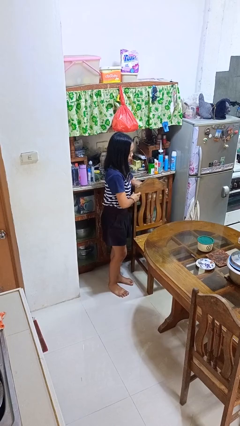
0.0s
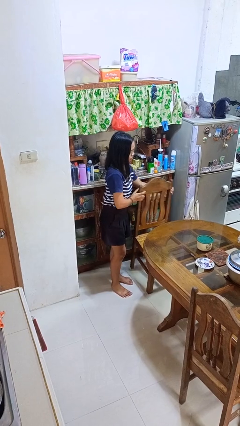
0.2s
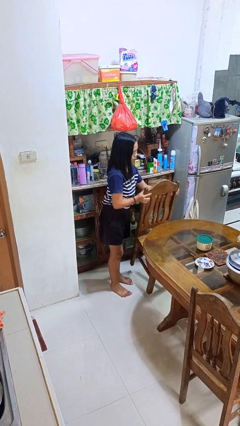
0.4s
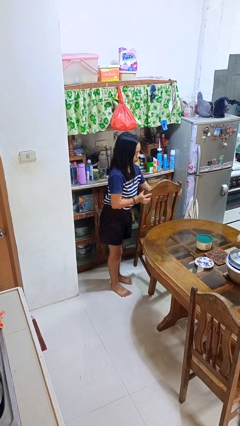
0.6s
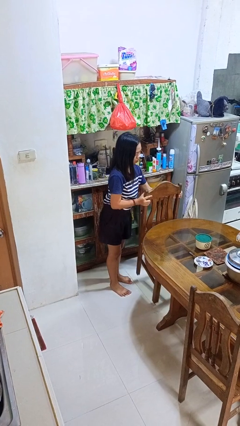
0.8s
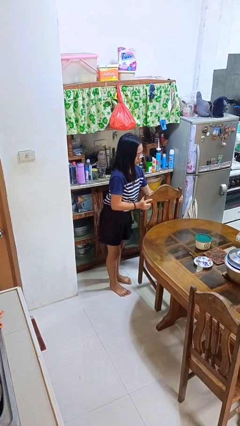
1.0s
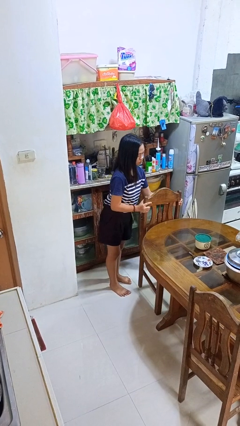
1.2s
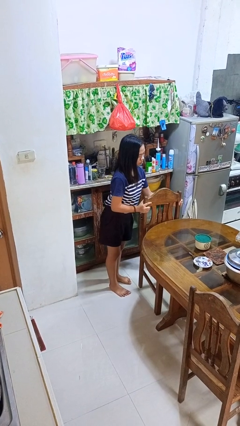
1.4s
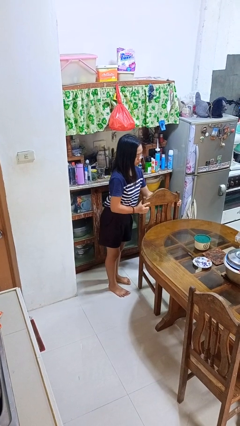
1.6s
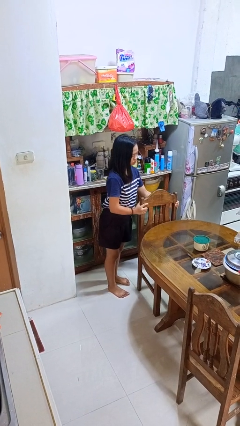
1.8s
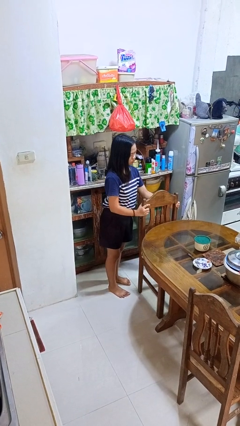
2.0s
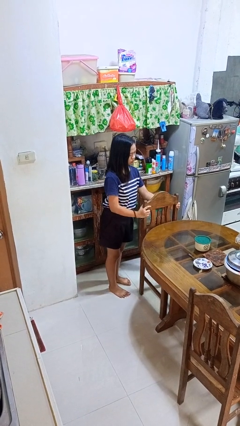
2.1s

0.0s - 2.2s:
person pushes in chair

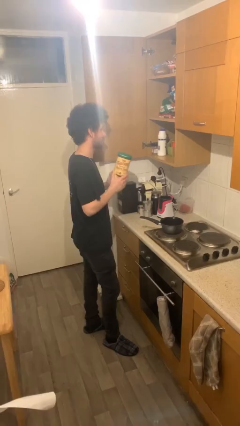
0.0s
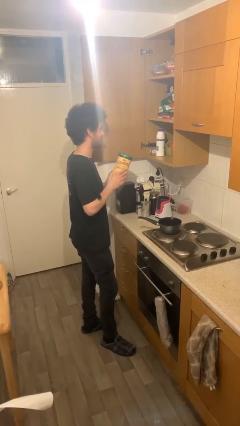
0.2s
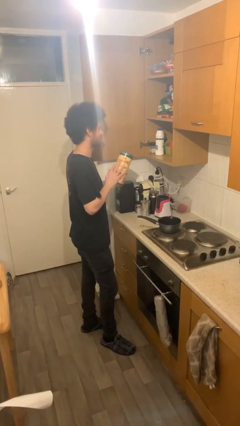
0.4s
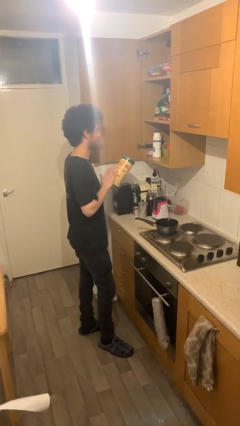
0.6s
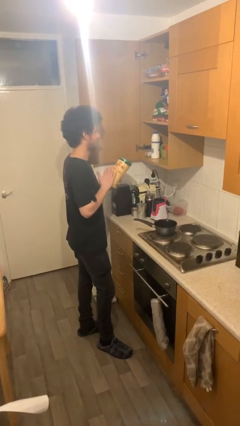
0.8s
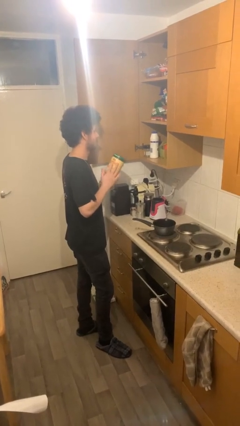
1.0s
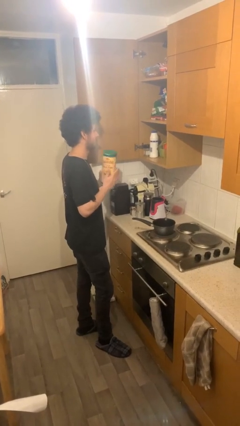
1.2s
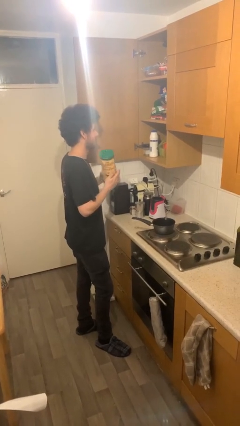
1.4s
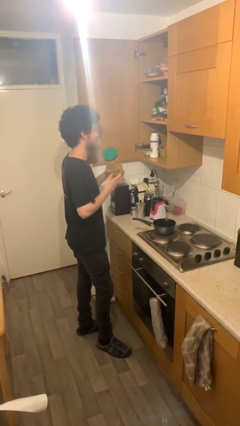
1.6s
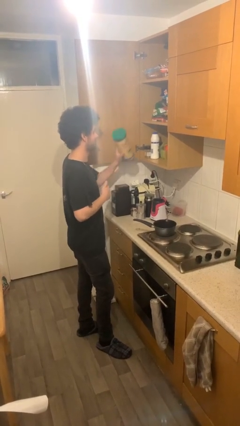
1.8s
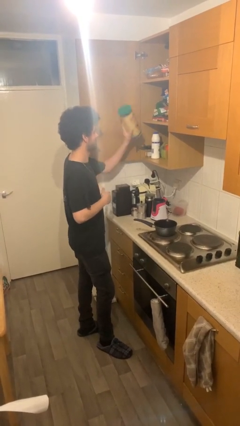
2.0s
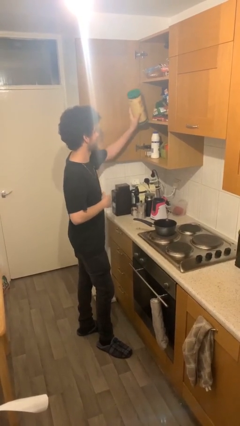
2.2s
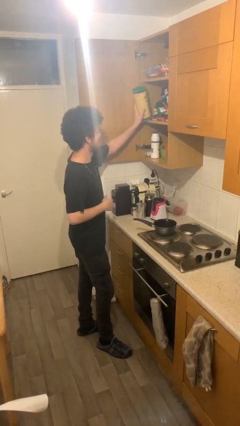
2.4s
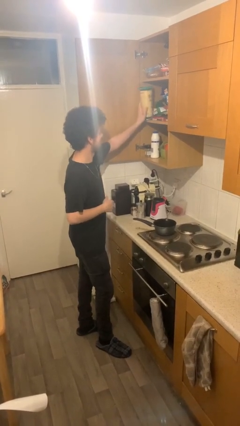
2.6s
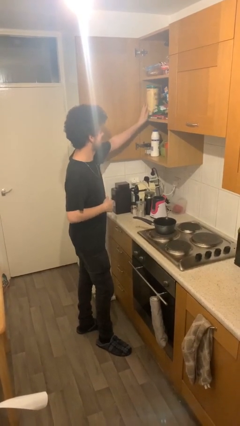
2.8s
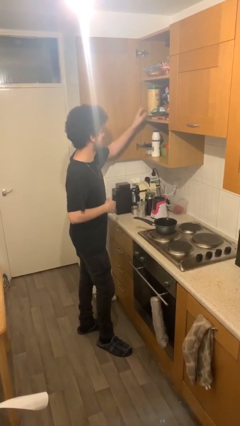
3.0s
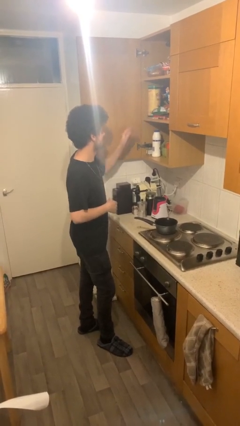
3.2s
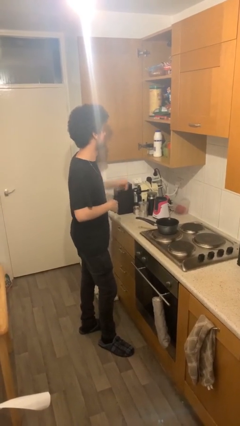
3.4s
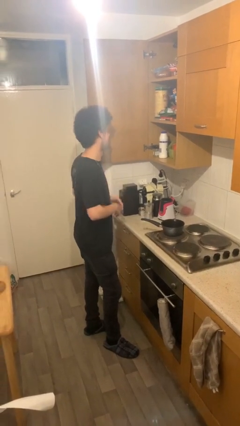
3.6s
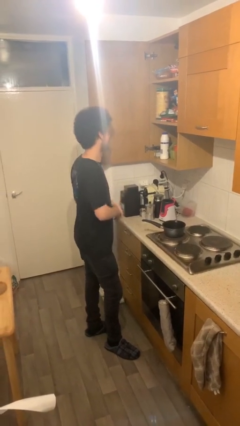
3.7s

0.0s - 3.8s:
person puts down object on shelf

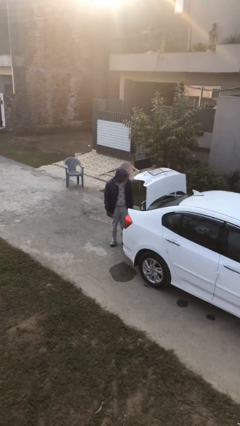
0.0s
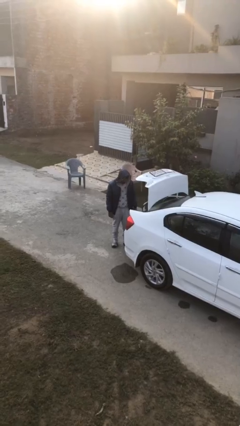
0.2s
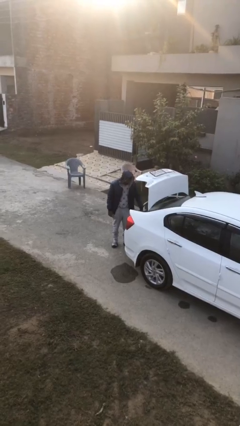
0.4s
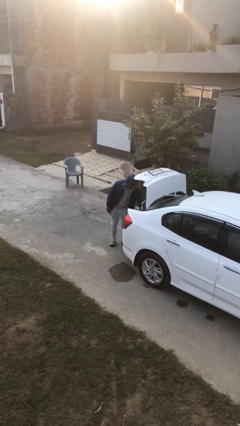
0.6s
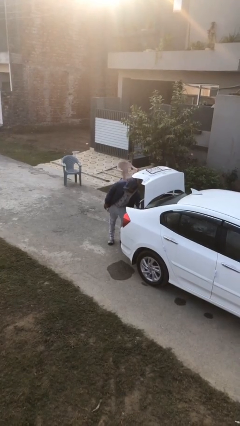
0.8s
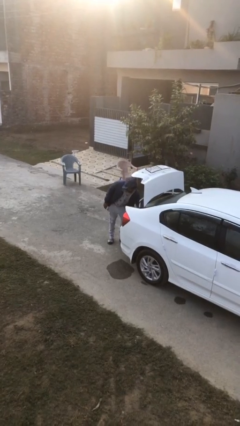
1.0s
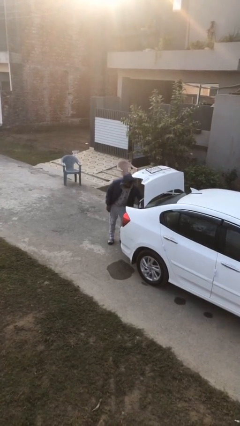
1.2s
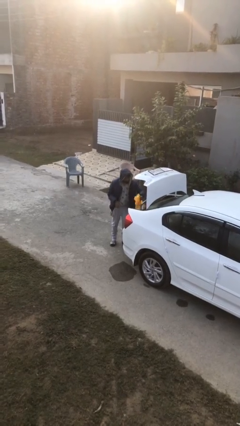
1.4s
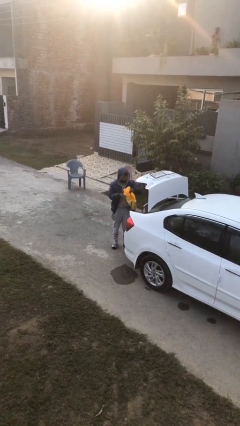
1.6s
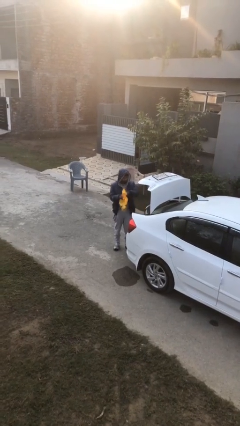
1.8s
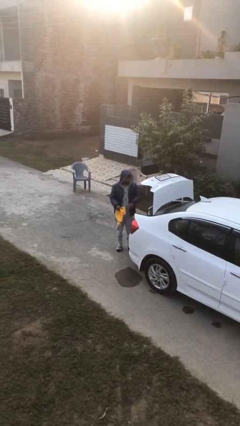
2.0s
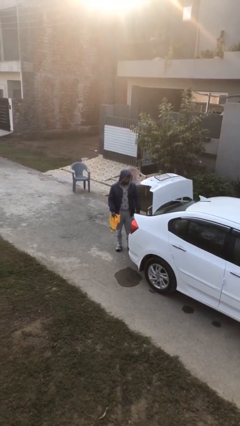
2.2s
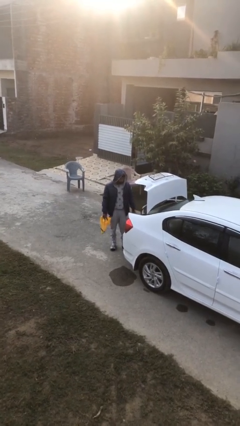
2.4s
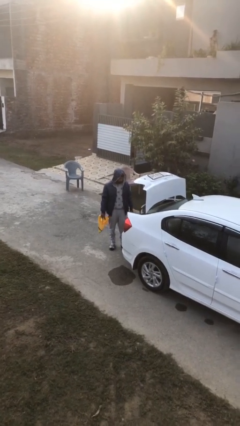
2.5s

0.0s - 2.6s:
person unloads car

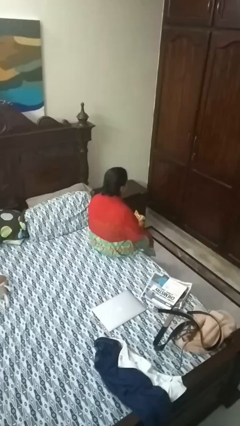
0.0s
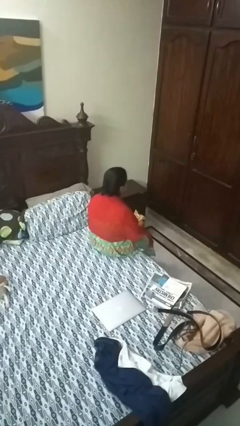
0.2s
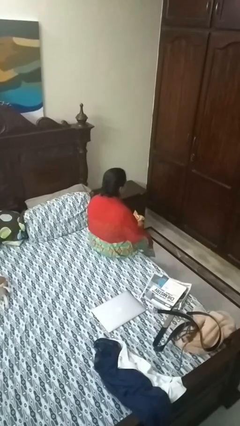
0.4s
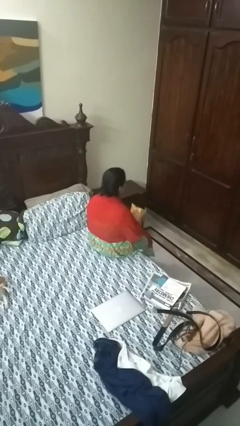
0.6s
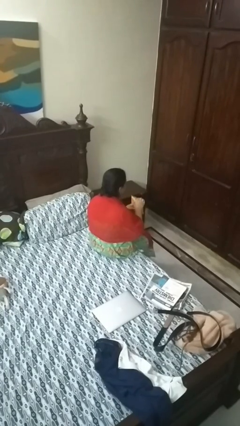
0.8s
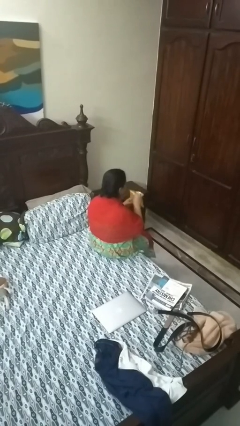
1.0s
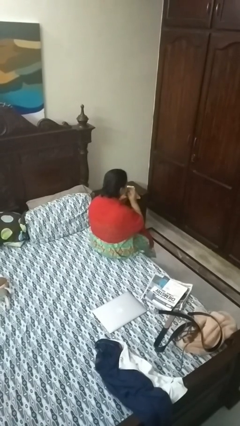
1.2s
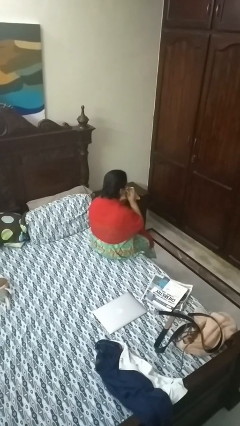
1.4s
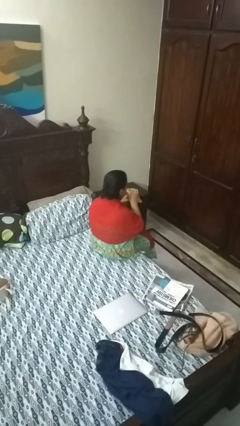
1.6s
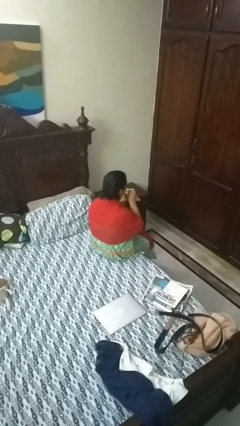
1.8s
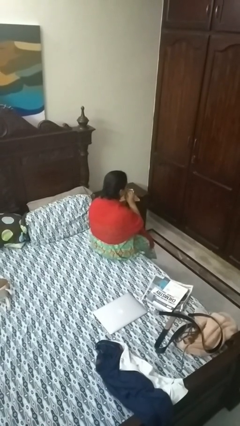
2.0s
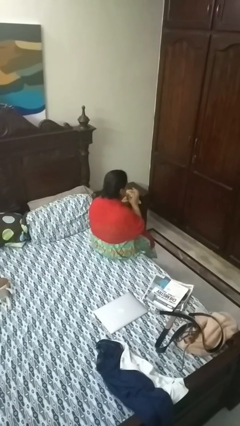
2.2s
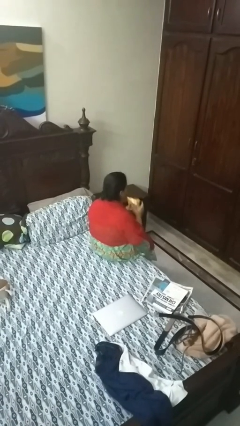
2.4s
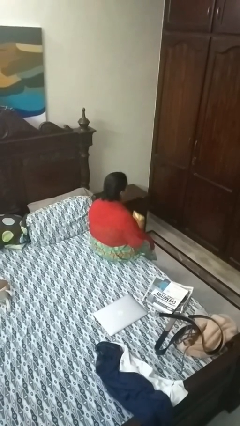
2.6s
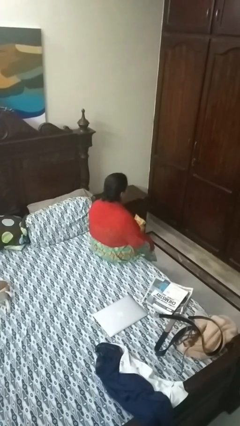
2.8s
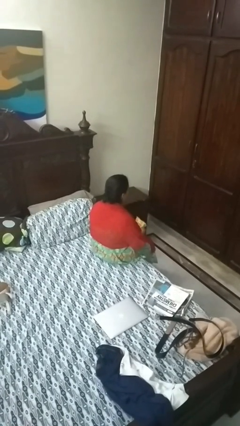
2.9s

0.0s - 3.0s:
person eats snack from bag

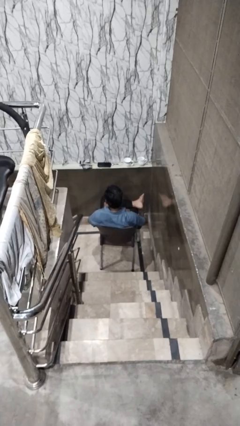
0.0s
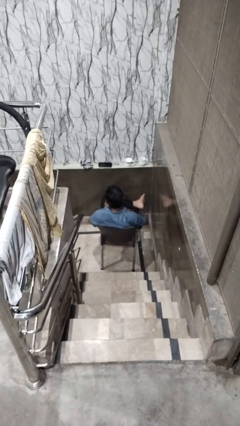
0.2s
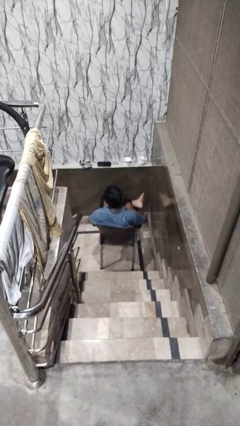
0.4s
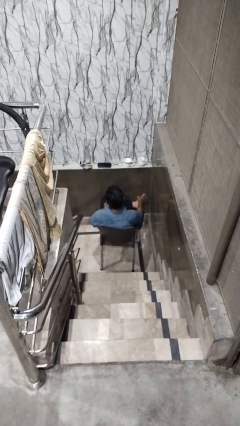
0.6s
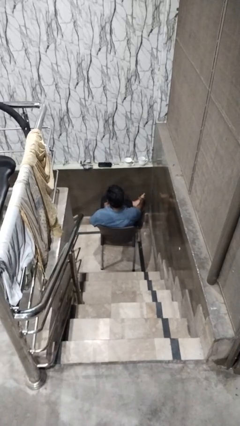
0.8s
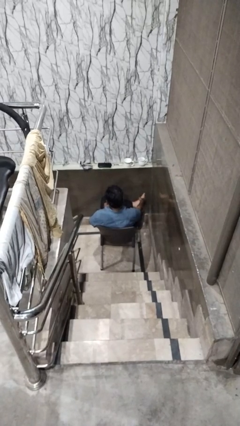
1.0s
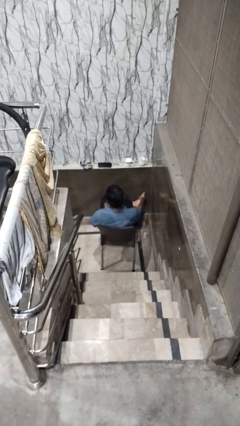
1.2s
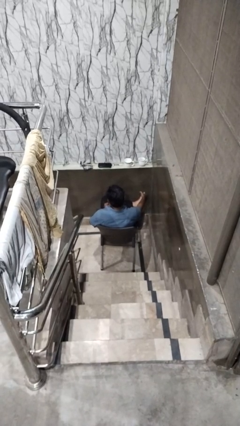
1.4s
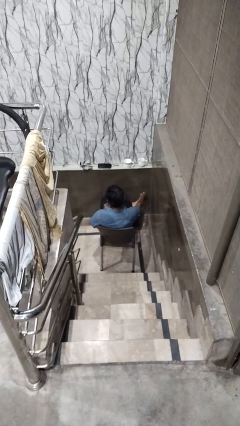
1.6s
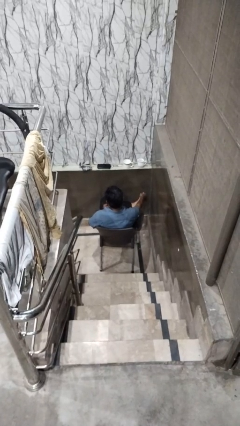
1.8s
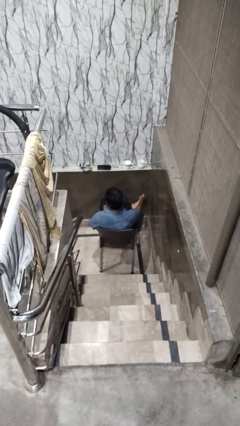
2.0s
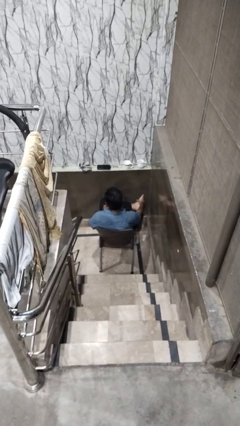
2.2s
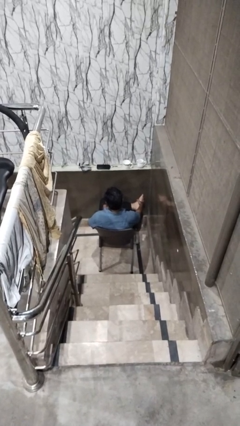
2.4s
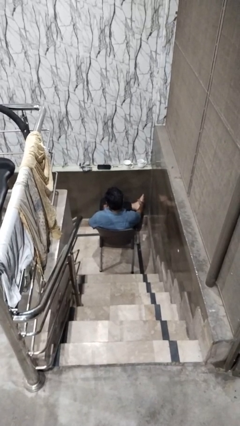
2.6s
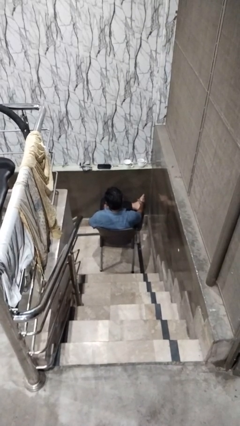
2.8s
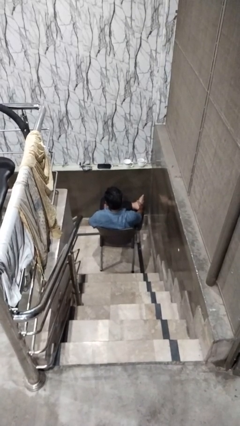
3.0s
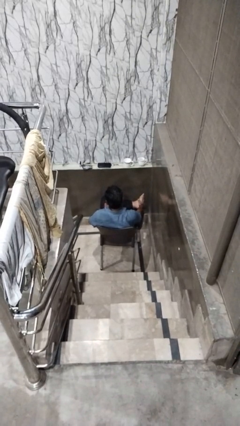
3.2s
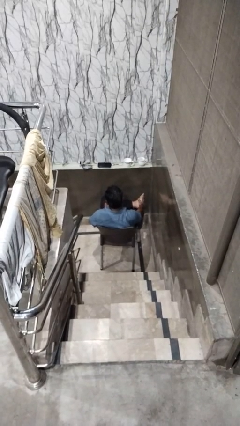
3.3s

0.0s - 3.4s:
person rubs foot
